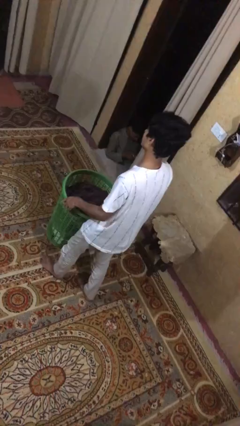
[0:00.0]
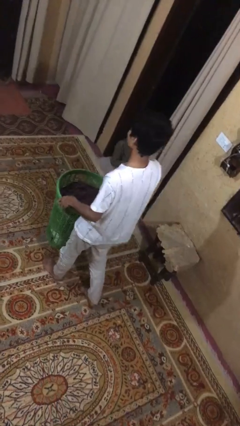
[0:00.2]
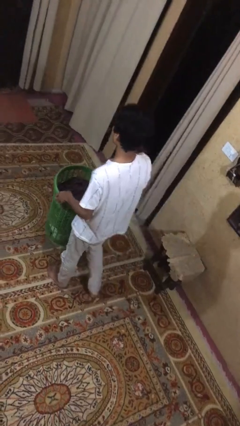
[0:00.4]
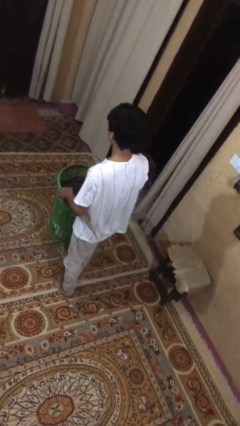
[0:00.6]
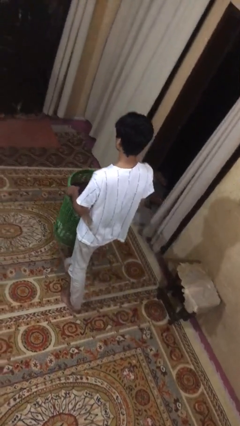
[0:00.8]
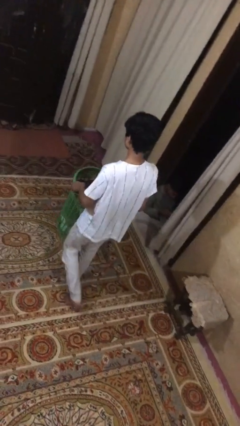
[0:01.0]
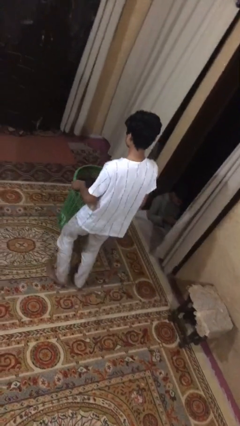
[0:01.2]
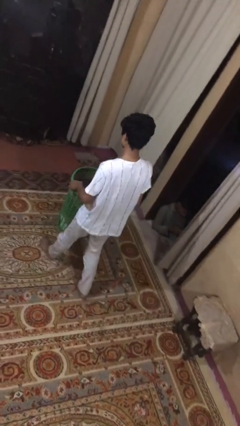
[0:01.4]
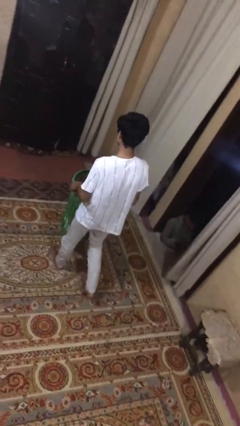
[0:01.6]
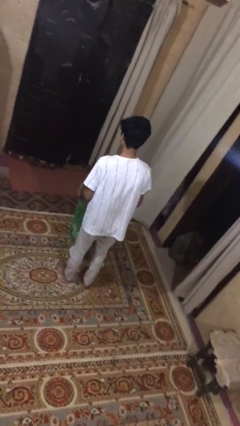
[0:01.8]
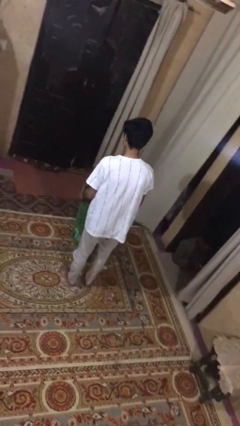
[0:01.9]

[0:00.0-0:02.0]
person carries heavy object

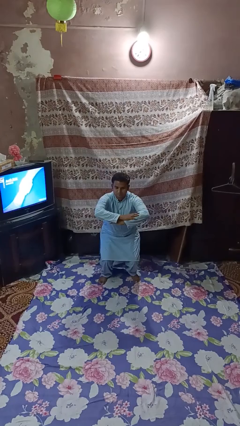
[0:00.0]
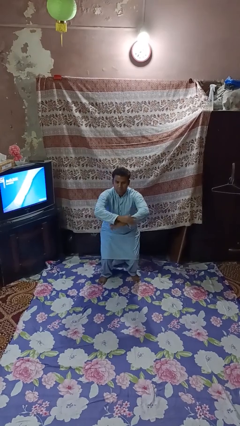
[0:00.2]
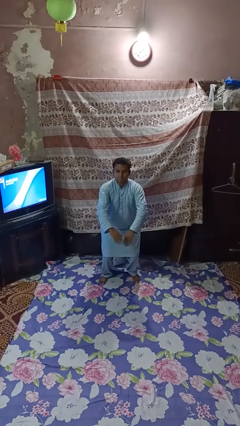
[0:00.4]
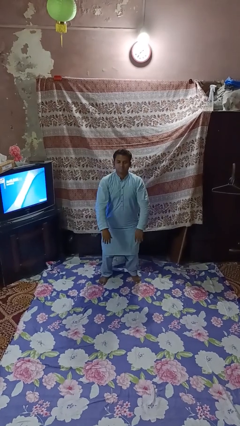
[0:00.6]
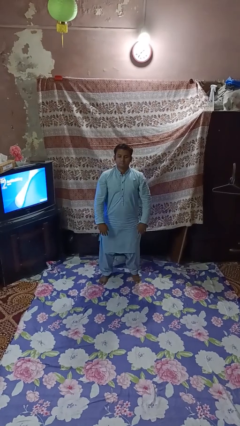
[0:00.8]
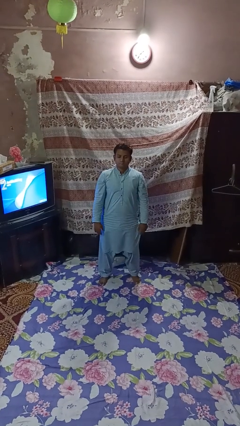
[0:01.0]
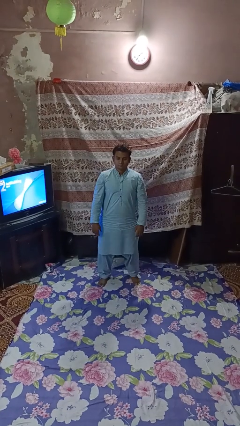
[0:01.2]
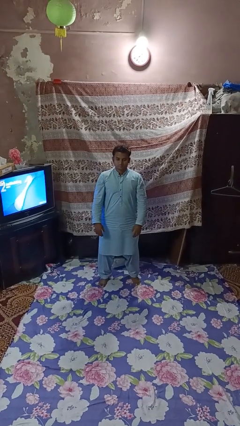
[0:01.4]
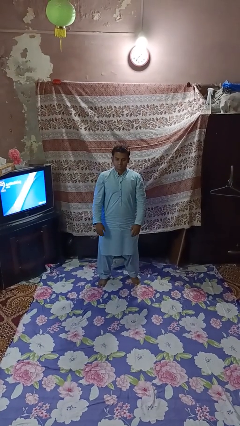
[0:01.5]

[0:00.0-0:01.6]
person stands up

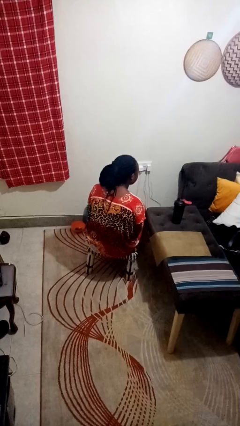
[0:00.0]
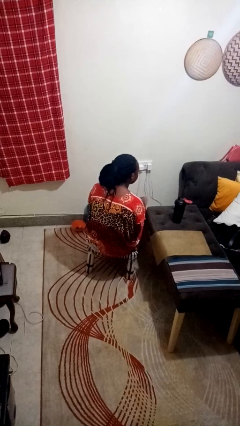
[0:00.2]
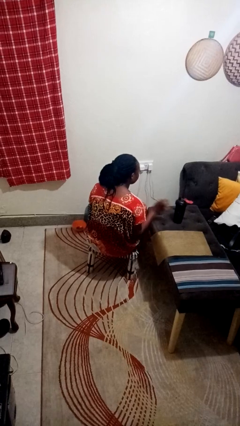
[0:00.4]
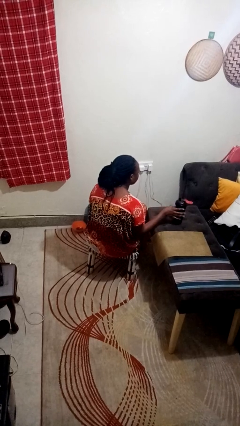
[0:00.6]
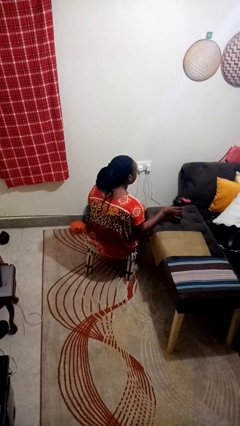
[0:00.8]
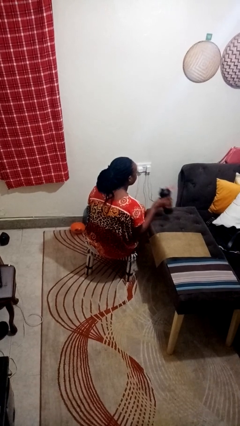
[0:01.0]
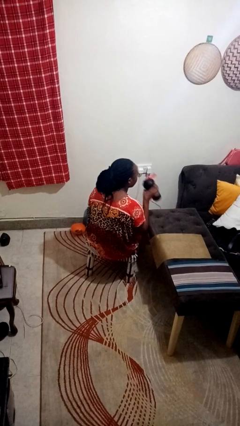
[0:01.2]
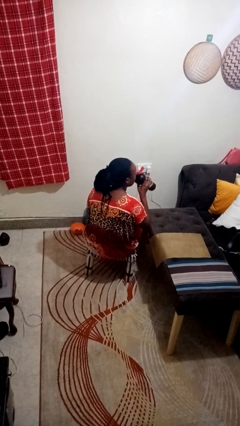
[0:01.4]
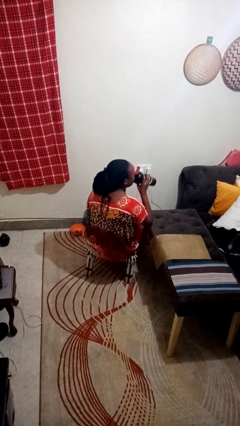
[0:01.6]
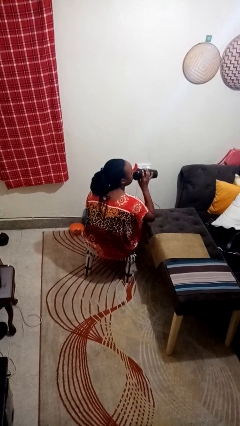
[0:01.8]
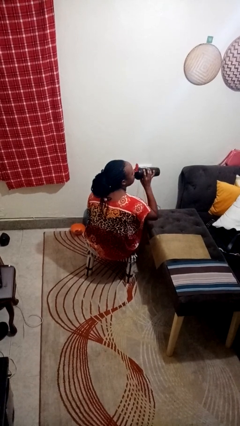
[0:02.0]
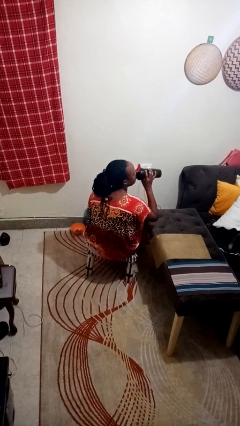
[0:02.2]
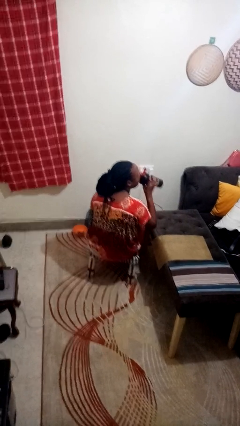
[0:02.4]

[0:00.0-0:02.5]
person drinks from cup

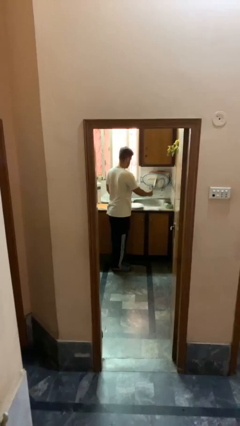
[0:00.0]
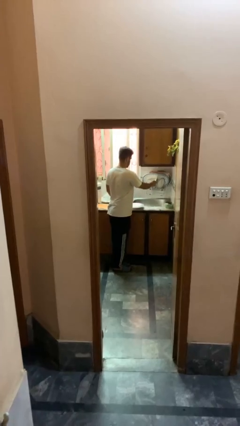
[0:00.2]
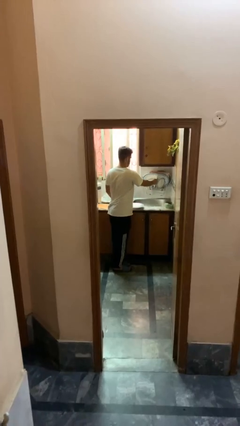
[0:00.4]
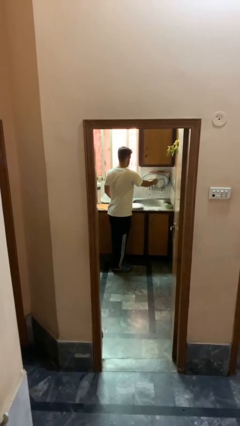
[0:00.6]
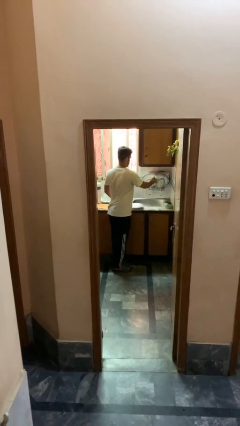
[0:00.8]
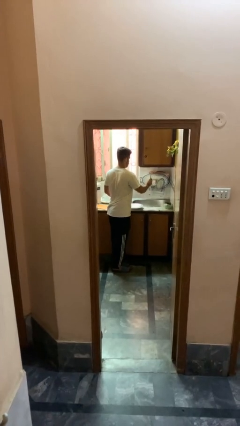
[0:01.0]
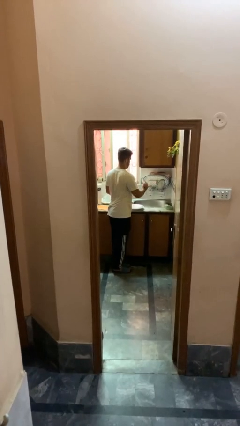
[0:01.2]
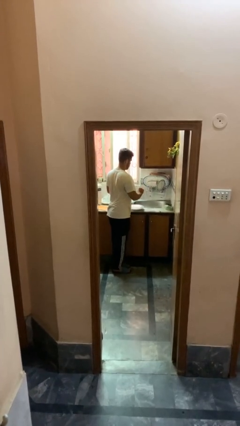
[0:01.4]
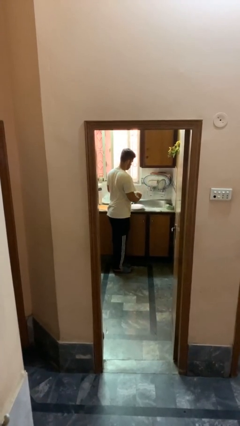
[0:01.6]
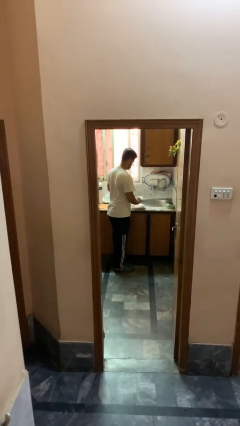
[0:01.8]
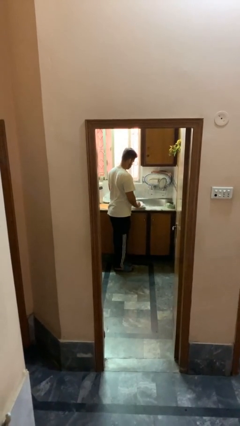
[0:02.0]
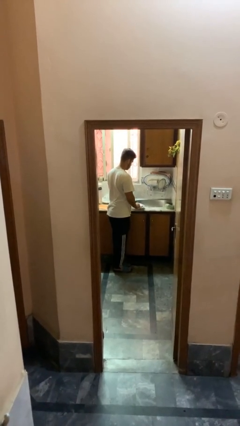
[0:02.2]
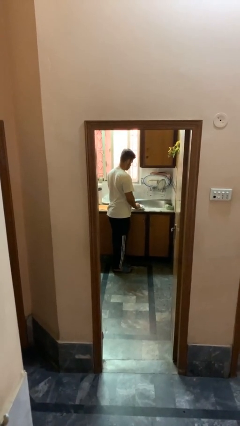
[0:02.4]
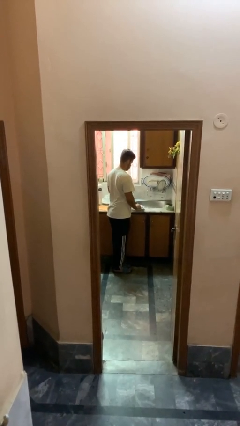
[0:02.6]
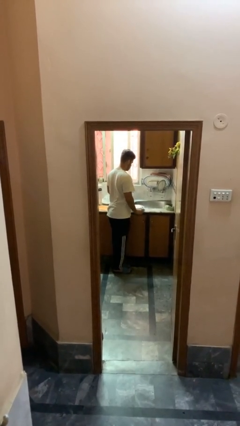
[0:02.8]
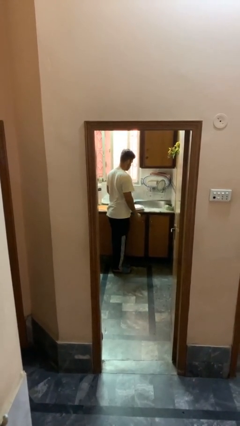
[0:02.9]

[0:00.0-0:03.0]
person unloads dishwasher

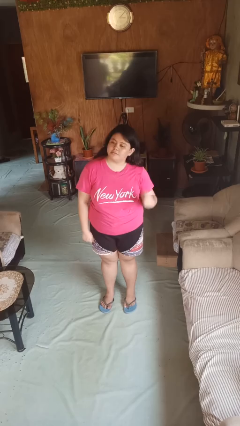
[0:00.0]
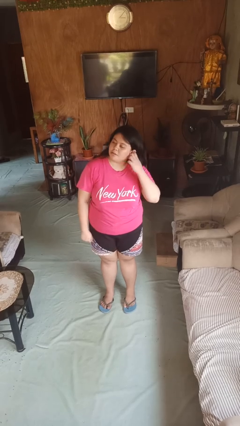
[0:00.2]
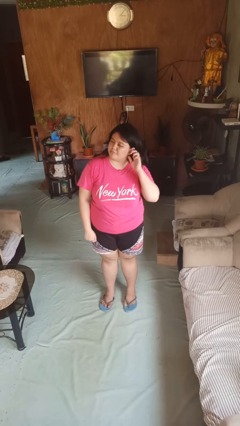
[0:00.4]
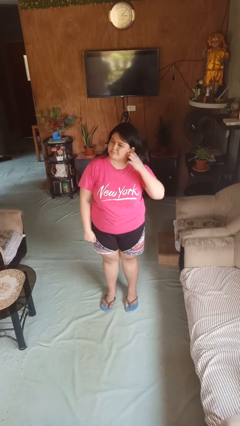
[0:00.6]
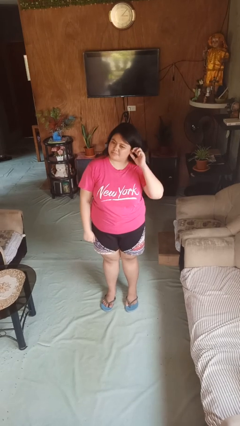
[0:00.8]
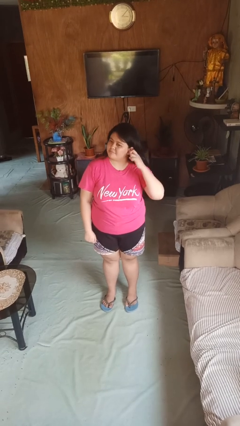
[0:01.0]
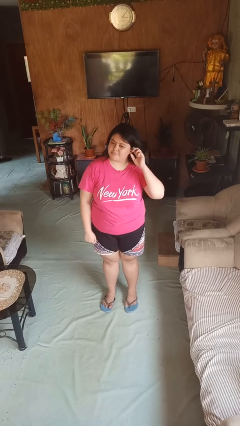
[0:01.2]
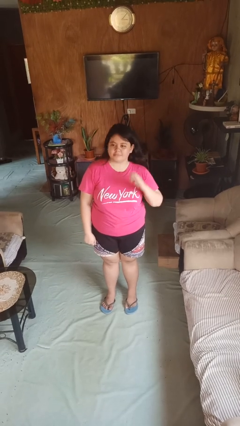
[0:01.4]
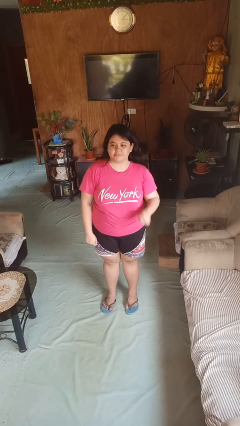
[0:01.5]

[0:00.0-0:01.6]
person touches earlobe

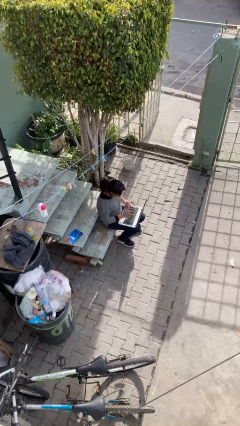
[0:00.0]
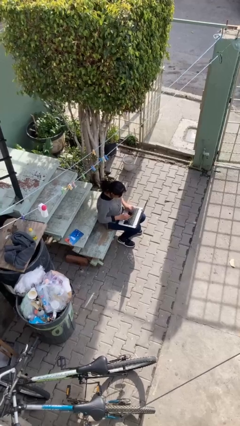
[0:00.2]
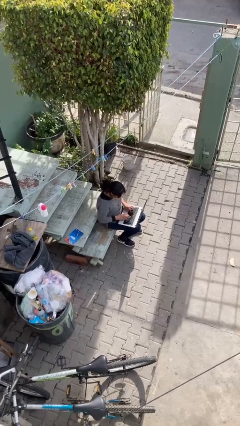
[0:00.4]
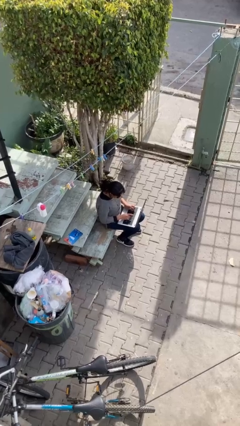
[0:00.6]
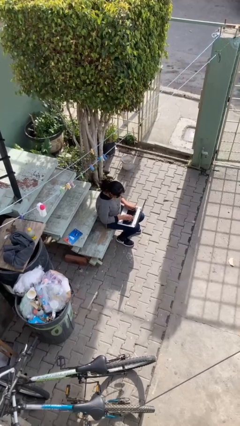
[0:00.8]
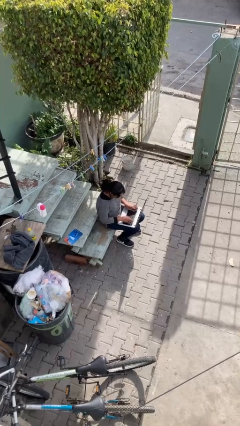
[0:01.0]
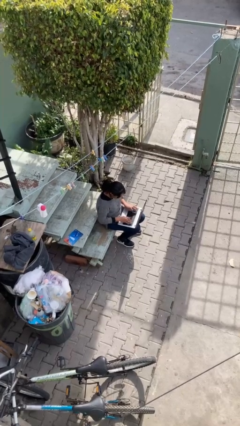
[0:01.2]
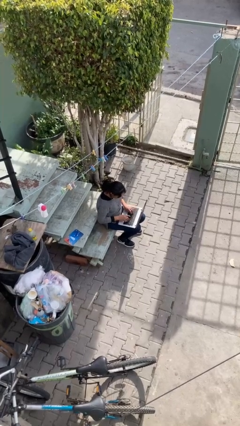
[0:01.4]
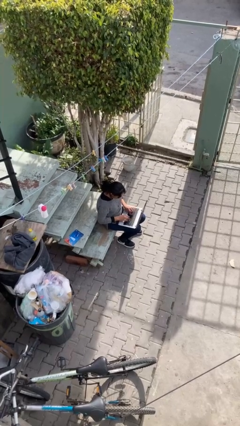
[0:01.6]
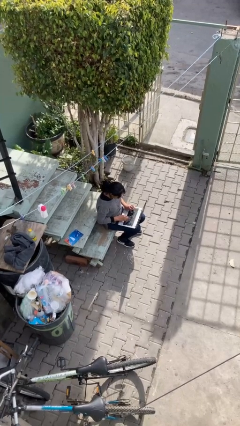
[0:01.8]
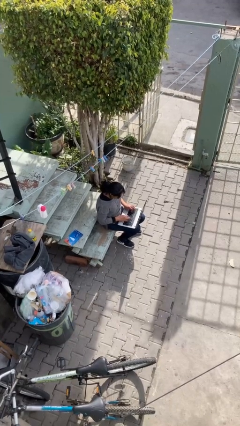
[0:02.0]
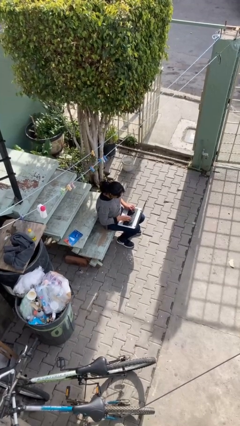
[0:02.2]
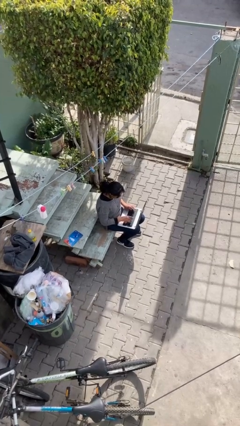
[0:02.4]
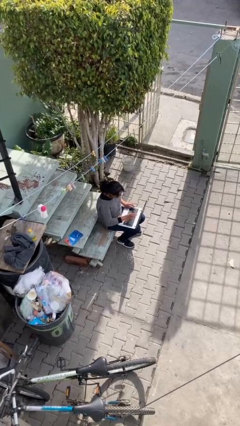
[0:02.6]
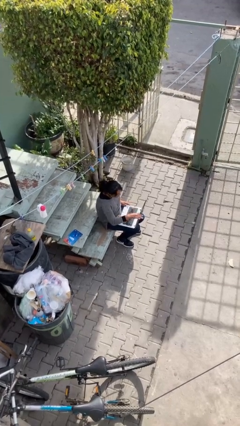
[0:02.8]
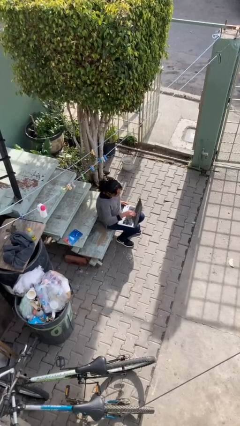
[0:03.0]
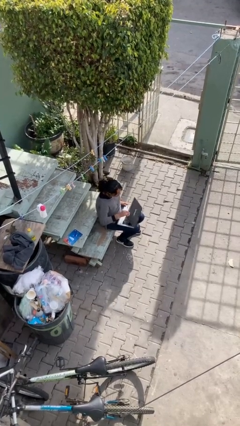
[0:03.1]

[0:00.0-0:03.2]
person interacts with laptop

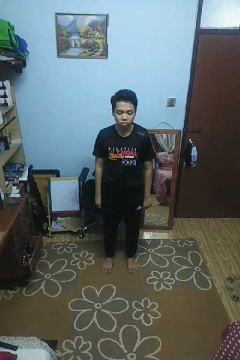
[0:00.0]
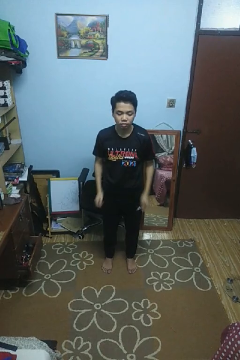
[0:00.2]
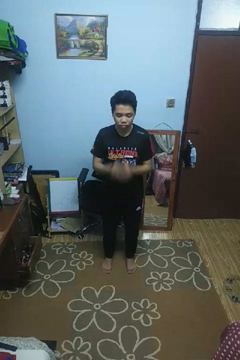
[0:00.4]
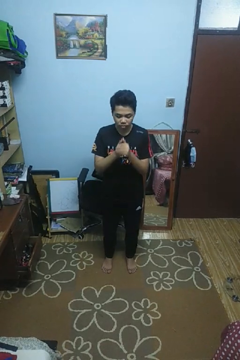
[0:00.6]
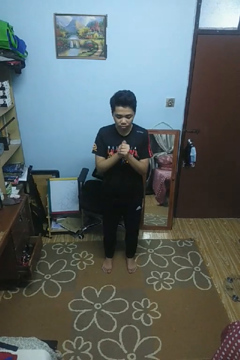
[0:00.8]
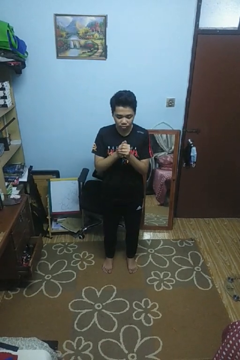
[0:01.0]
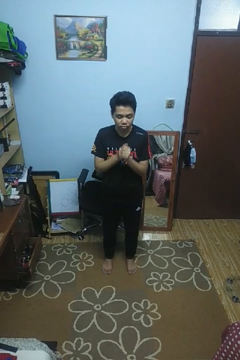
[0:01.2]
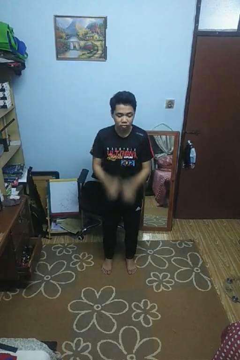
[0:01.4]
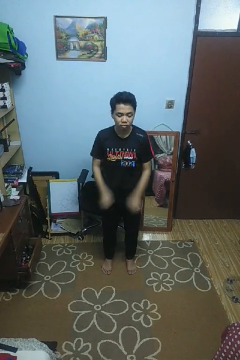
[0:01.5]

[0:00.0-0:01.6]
person cracks knuckles

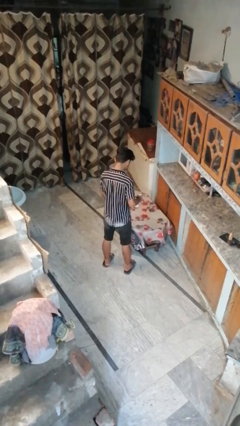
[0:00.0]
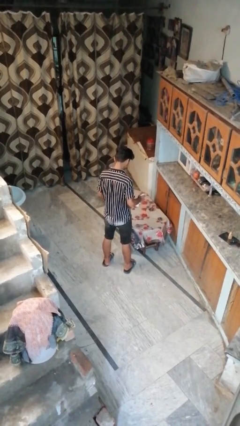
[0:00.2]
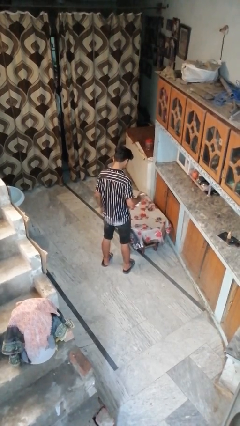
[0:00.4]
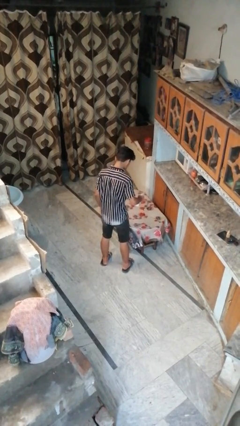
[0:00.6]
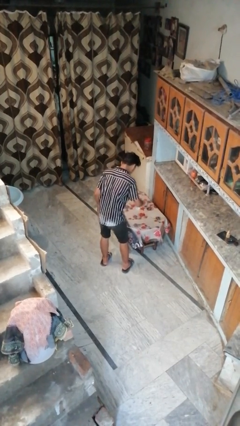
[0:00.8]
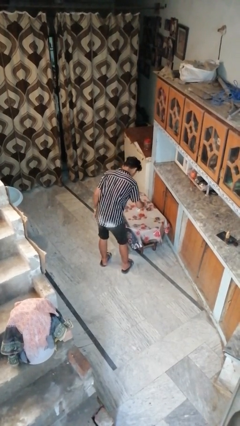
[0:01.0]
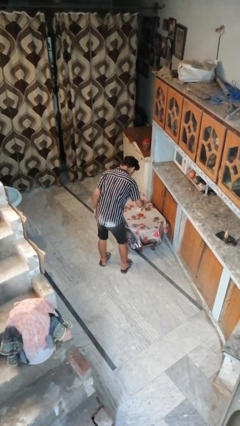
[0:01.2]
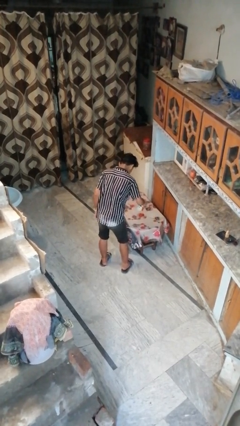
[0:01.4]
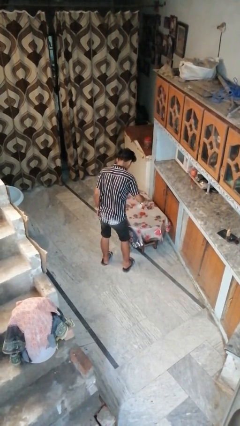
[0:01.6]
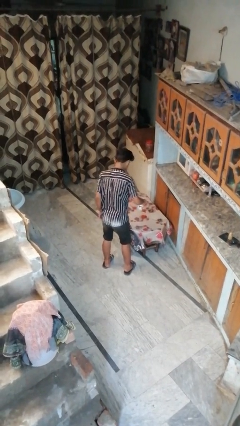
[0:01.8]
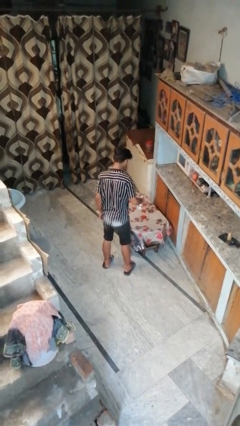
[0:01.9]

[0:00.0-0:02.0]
person sprays from bottle
